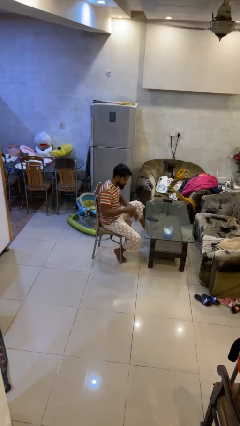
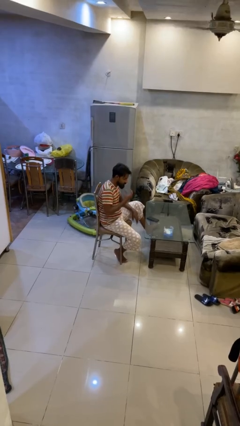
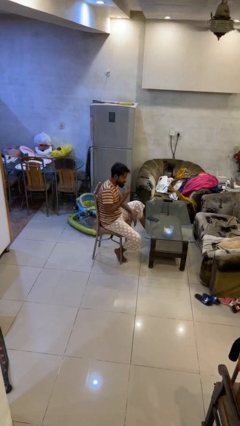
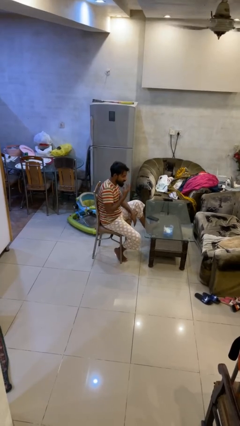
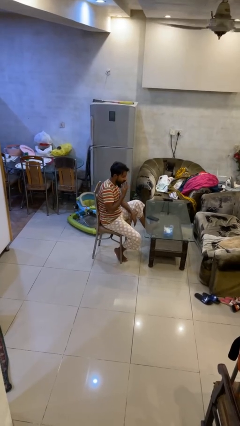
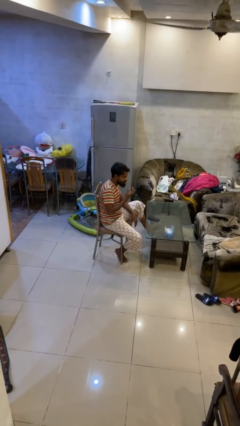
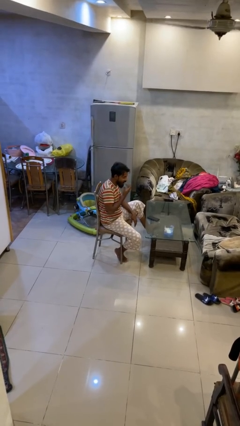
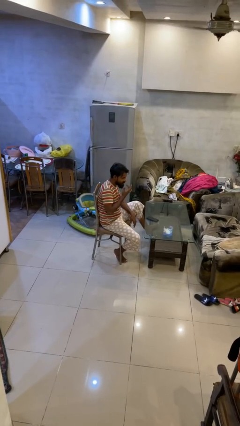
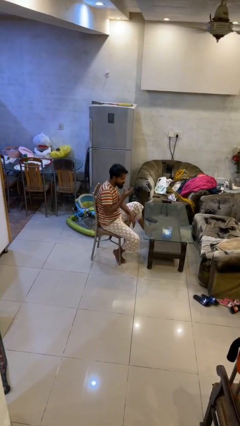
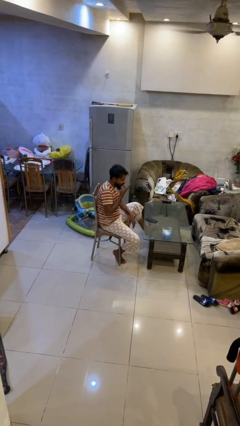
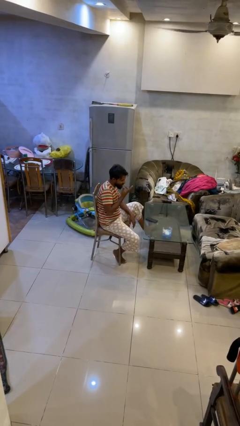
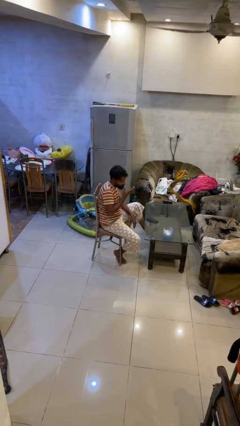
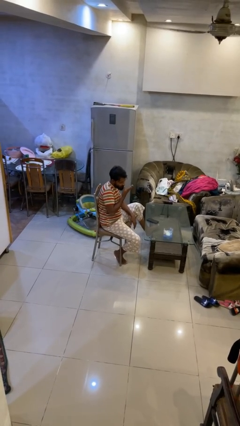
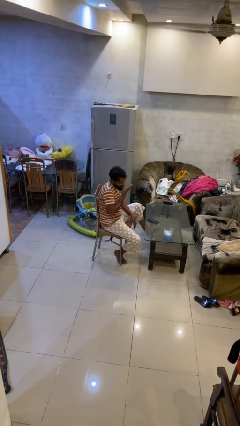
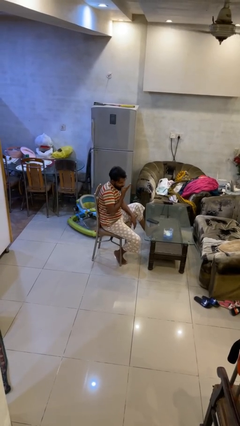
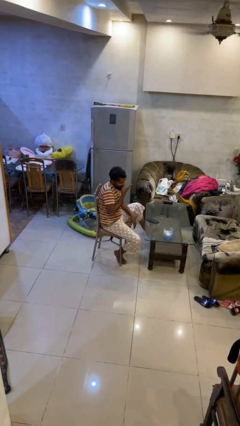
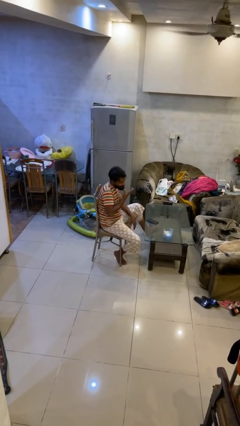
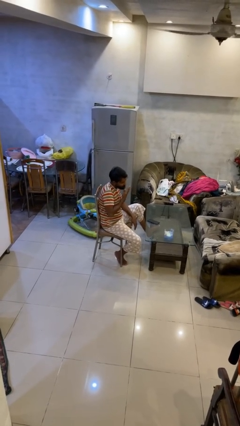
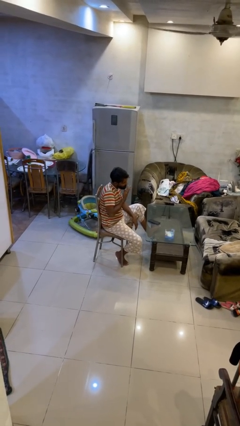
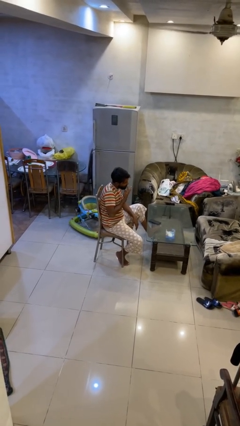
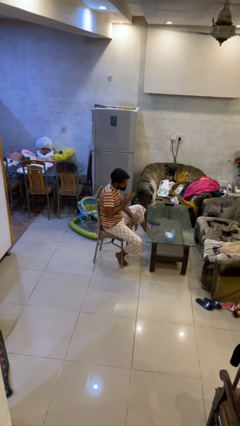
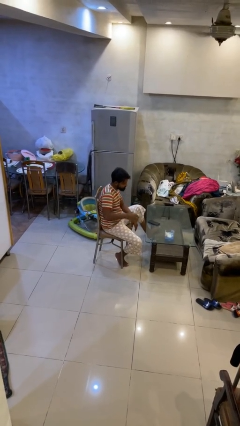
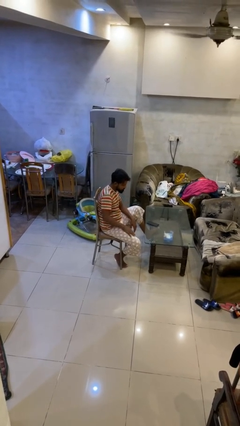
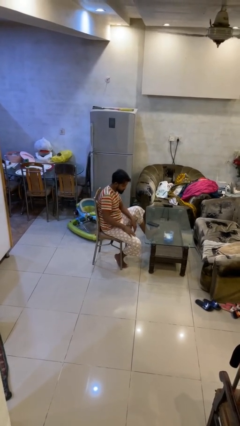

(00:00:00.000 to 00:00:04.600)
person licks fingers

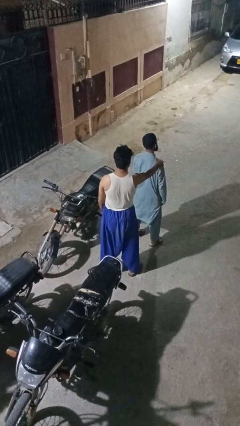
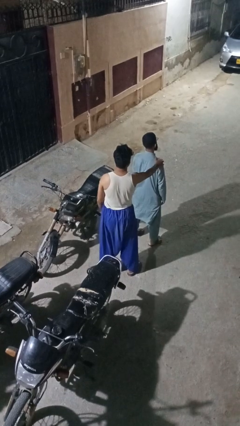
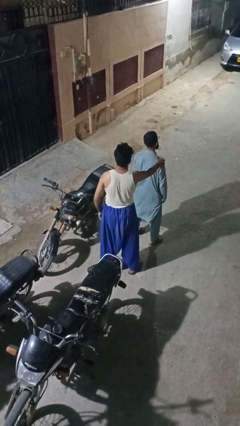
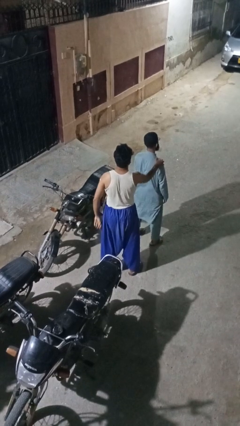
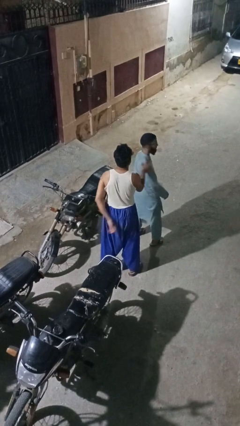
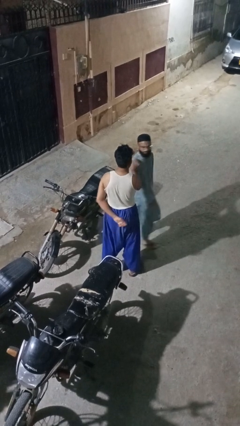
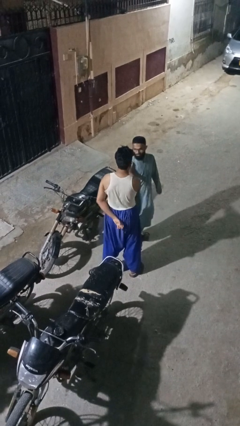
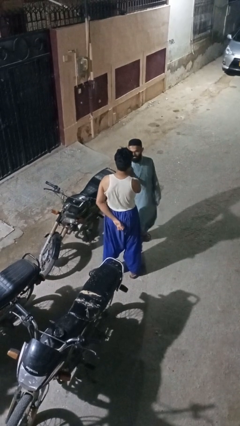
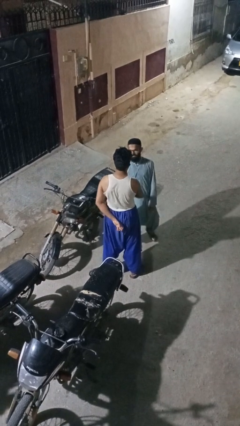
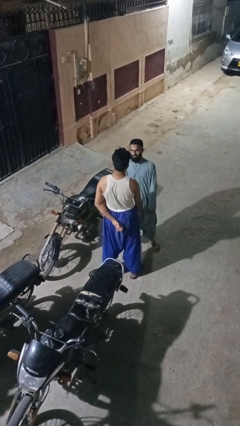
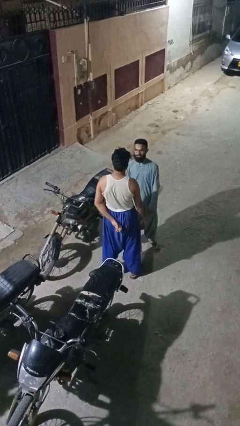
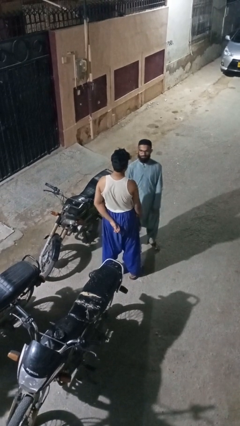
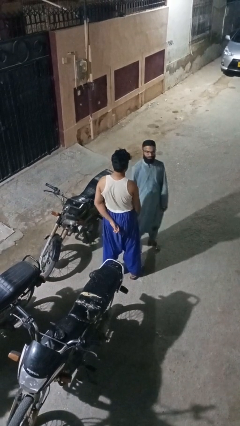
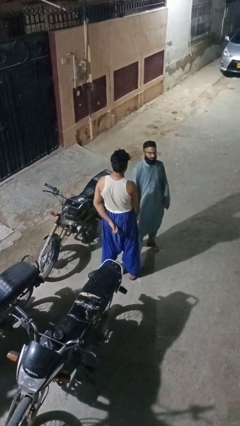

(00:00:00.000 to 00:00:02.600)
person spins person around

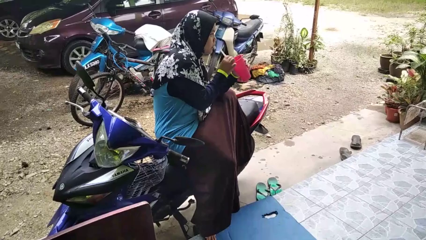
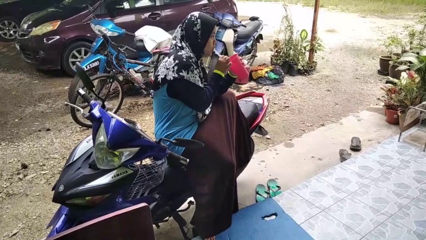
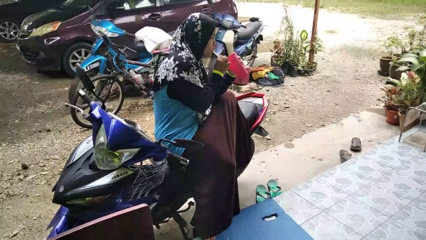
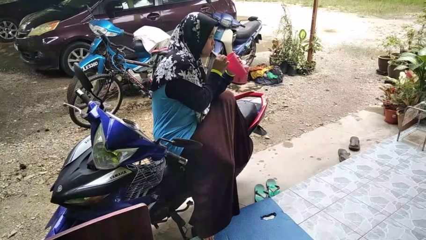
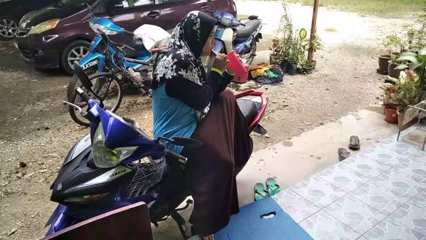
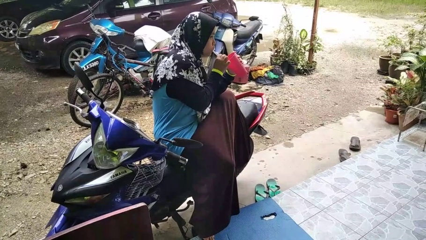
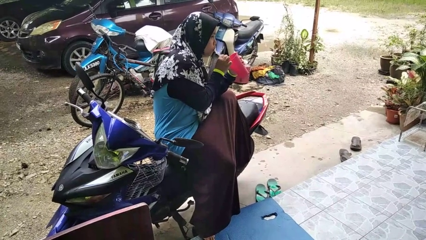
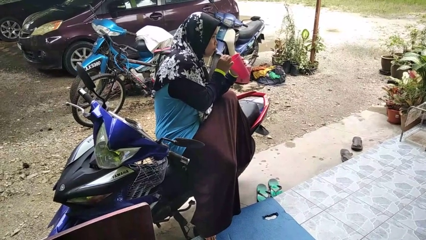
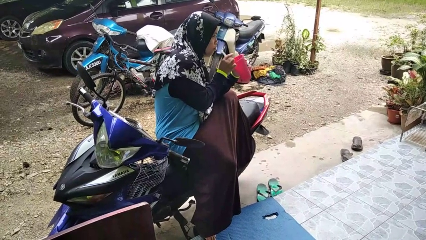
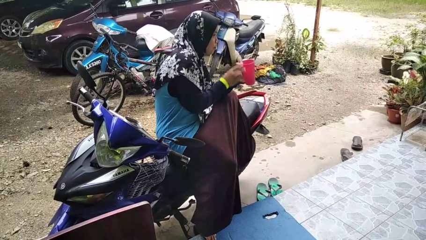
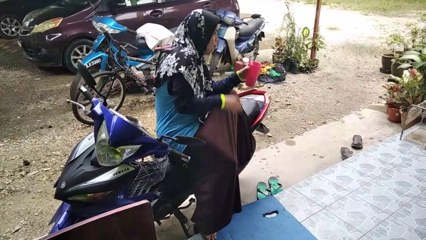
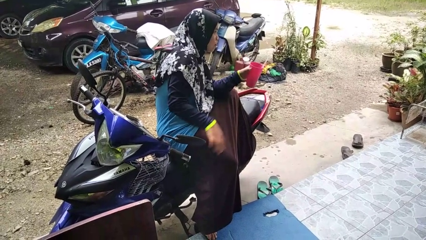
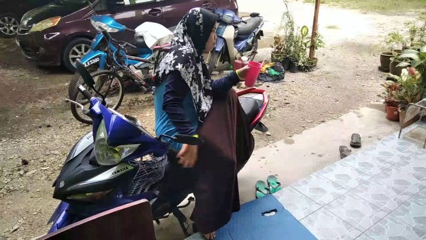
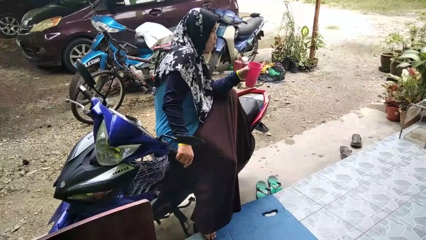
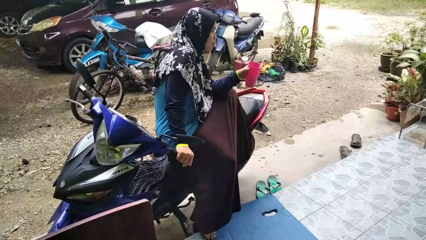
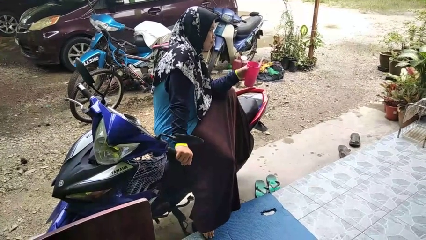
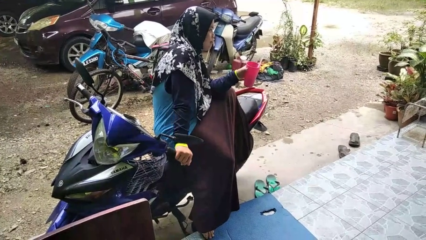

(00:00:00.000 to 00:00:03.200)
person drinks from straw

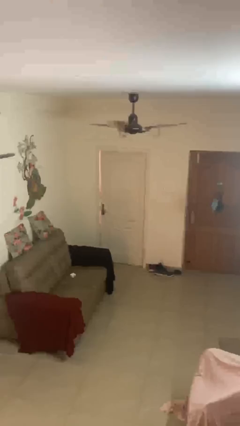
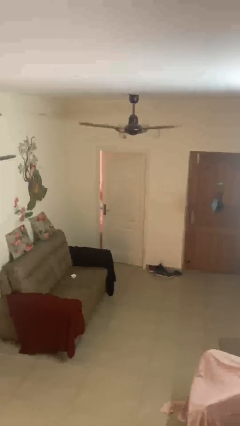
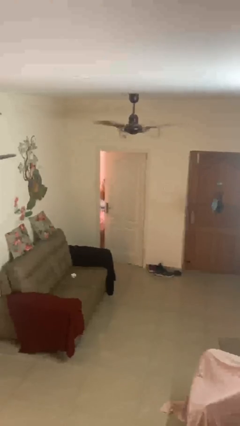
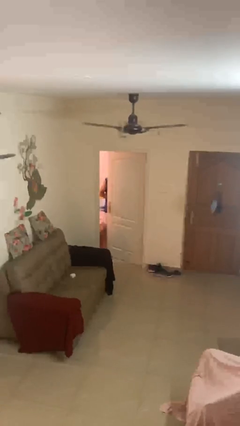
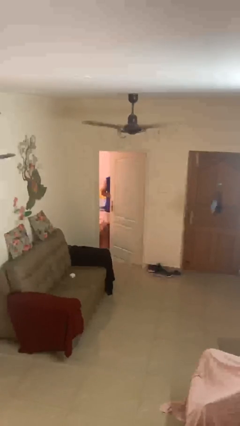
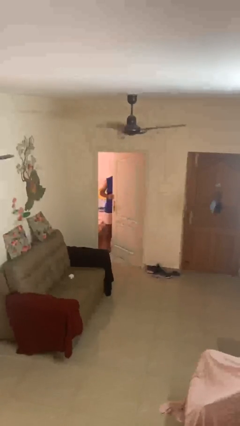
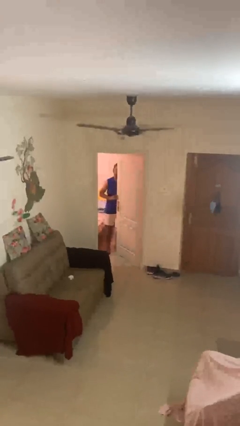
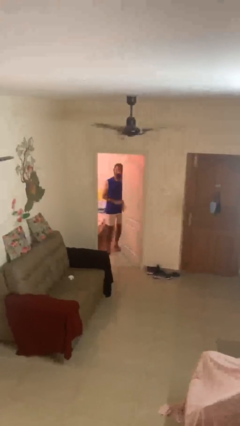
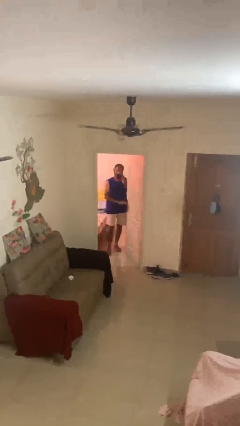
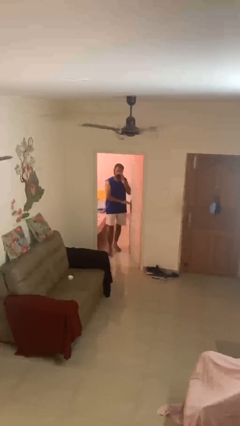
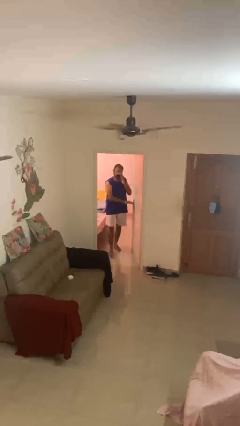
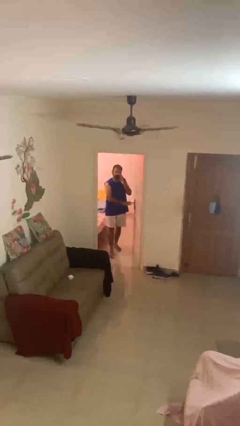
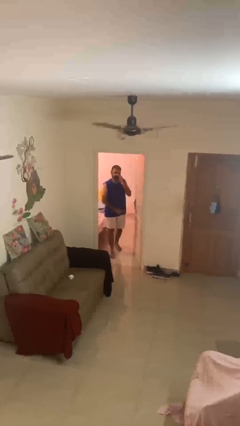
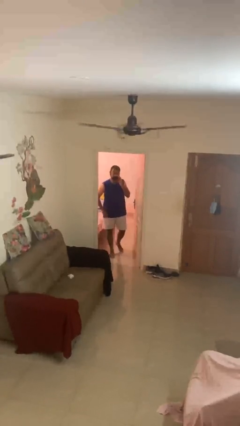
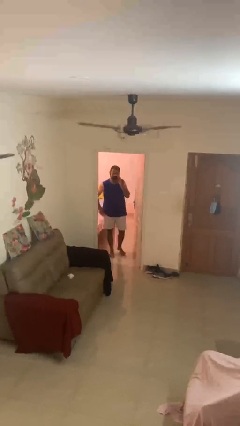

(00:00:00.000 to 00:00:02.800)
person opens facility door

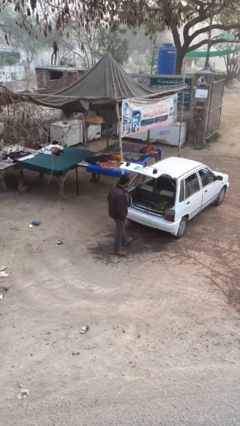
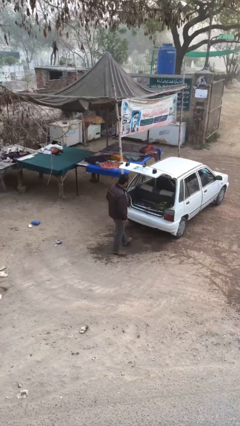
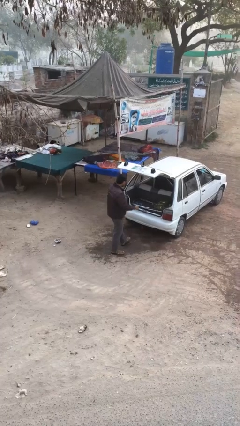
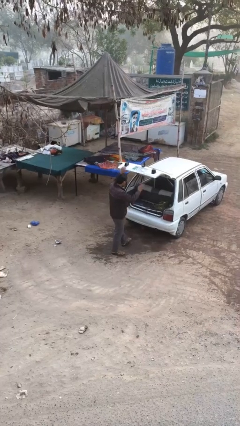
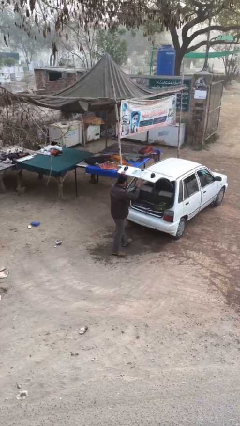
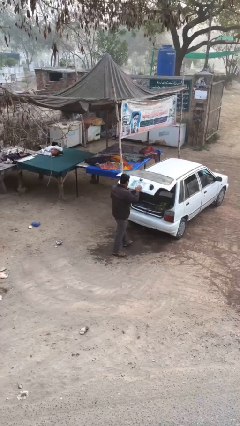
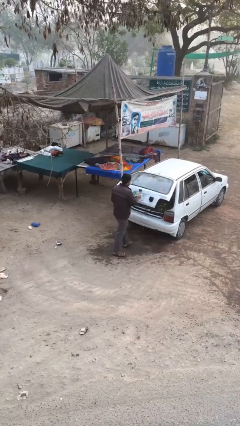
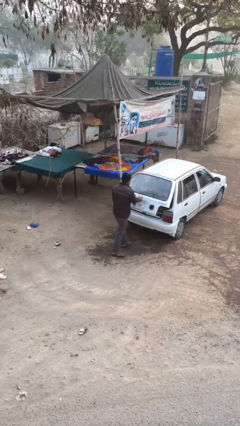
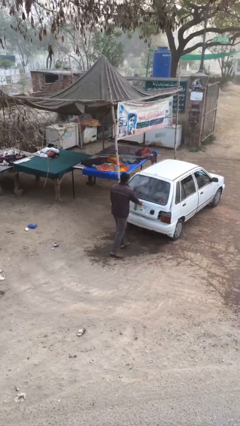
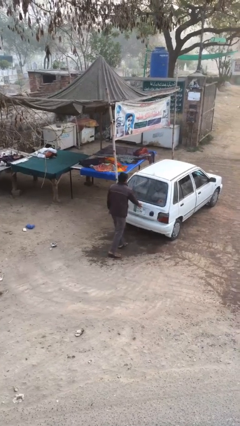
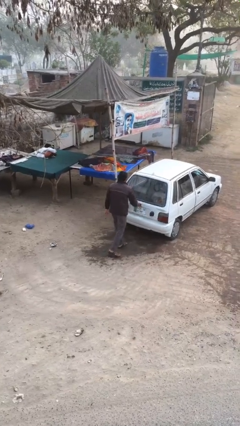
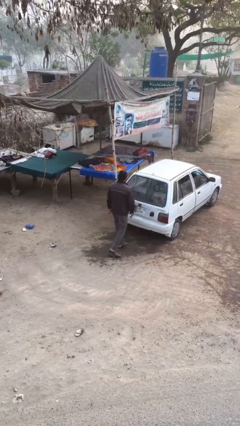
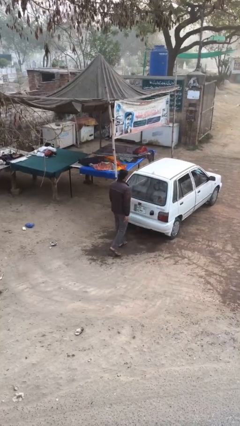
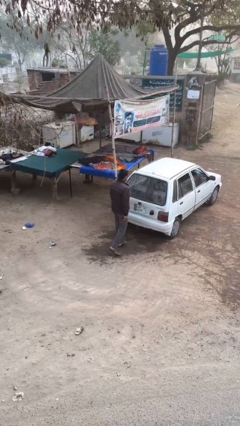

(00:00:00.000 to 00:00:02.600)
person closes car trunk

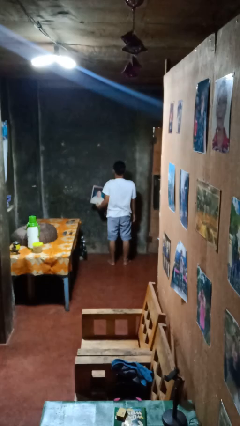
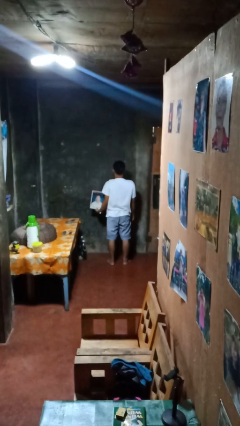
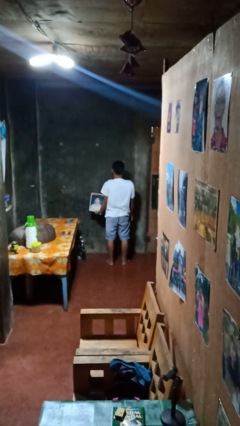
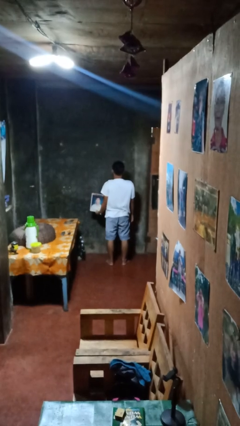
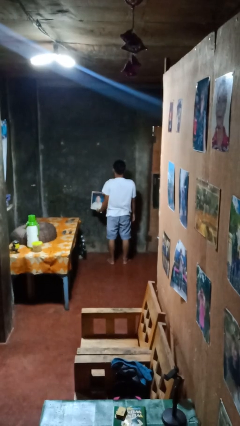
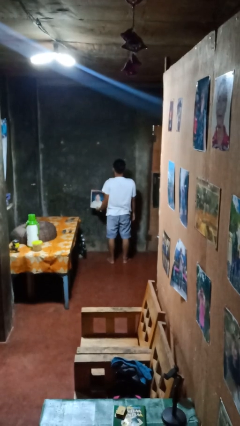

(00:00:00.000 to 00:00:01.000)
person takes down picture frame

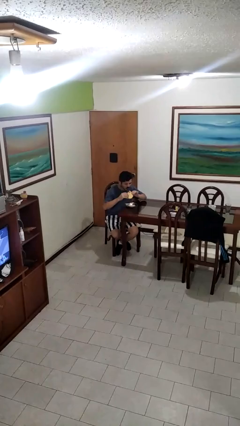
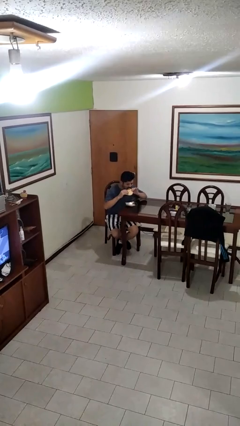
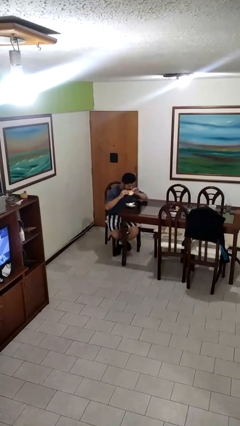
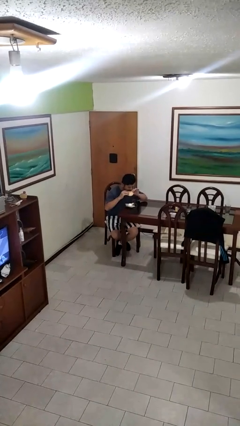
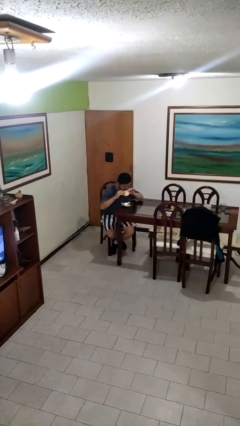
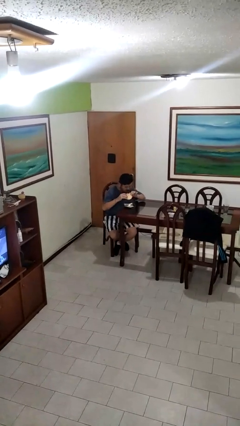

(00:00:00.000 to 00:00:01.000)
person eats with hands
